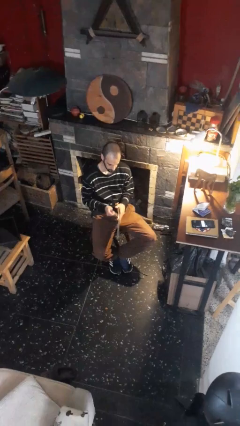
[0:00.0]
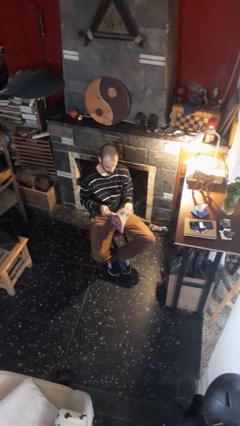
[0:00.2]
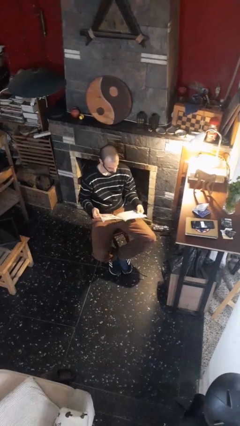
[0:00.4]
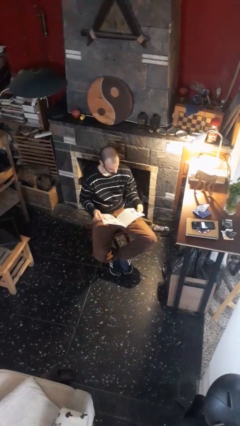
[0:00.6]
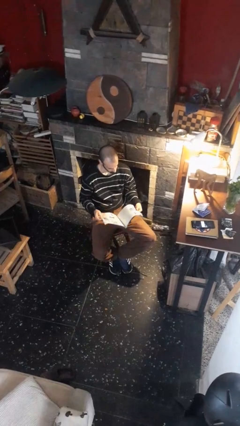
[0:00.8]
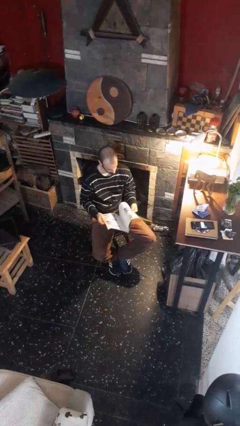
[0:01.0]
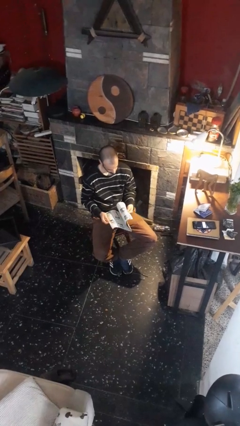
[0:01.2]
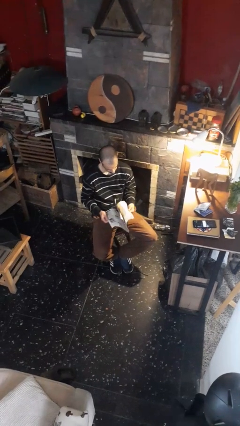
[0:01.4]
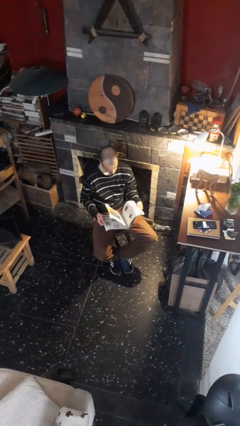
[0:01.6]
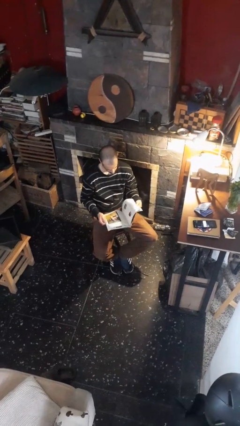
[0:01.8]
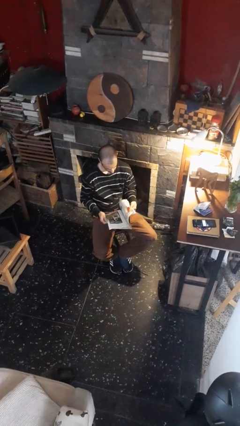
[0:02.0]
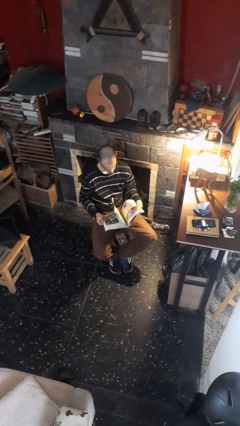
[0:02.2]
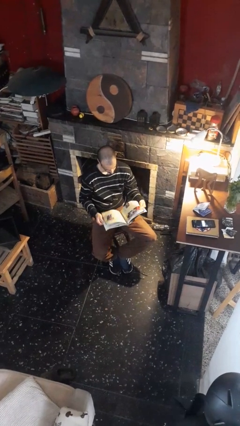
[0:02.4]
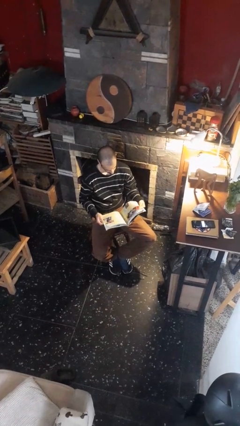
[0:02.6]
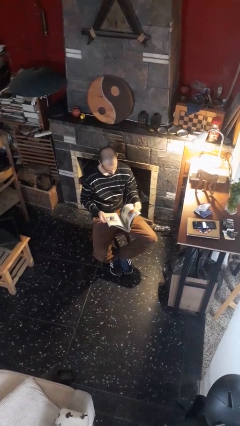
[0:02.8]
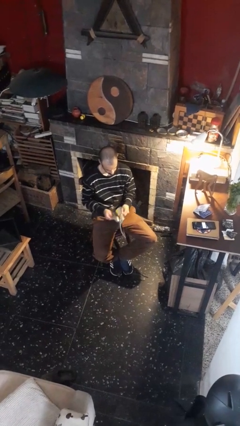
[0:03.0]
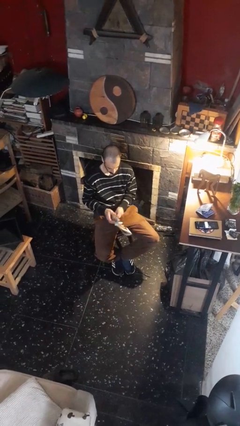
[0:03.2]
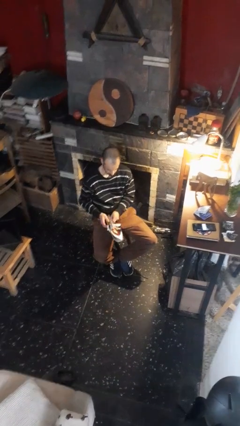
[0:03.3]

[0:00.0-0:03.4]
person reads magazine

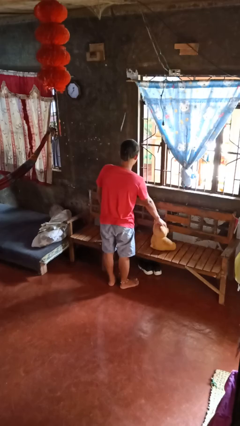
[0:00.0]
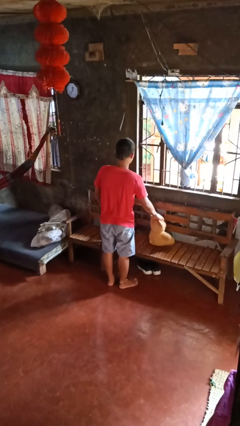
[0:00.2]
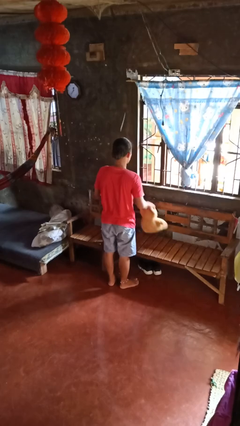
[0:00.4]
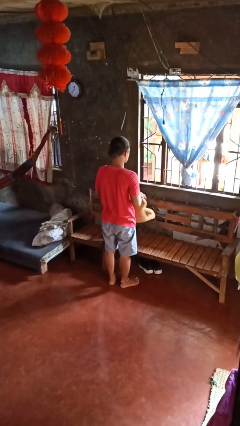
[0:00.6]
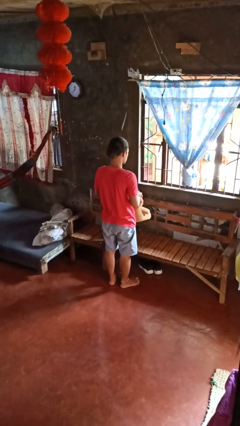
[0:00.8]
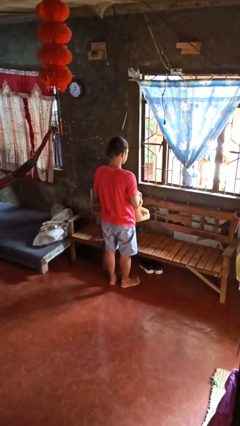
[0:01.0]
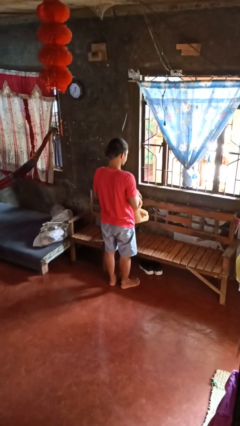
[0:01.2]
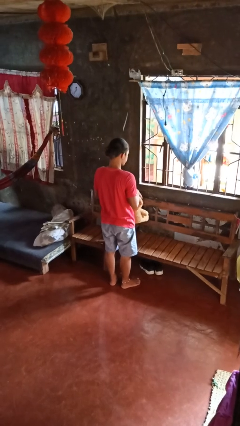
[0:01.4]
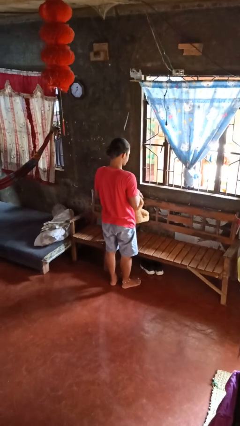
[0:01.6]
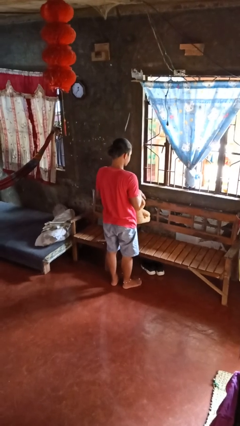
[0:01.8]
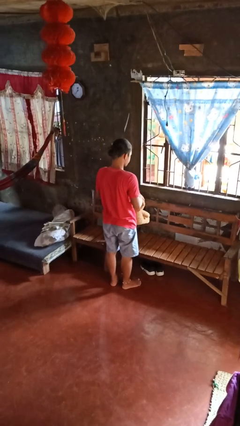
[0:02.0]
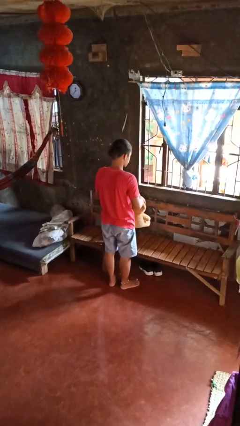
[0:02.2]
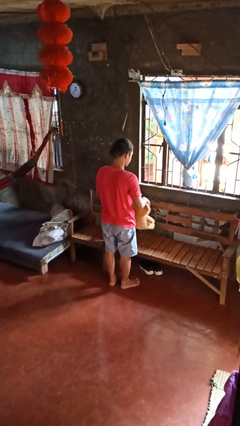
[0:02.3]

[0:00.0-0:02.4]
person picks up object from couch

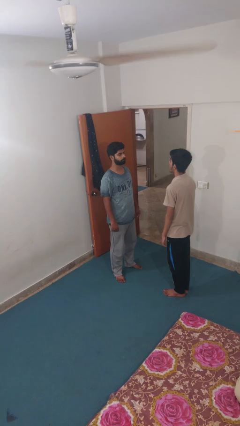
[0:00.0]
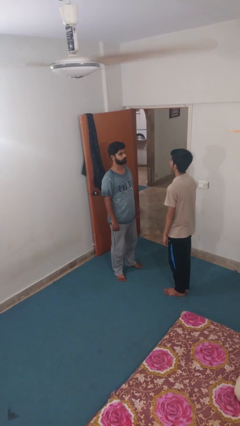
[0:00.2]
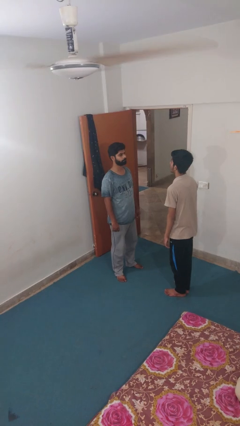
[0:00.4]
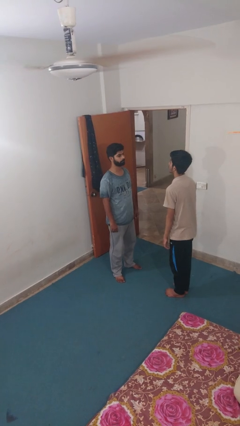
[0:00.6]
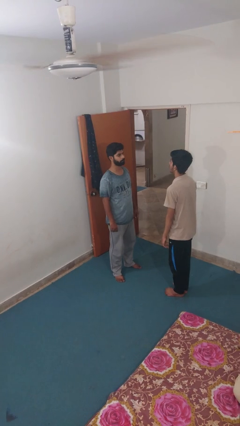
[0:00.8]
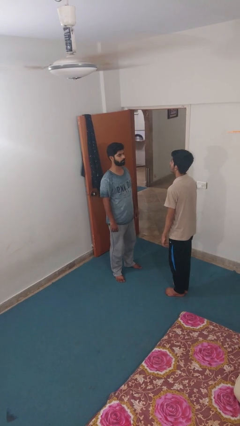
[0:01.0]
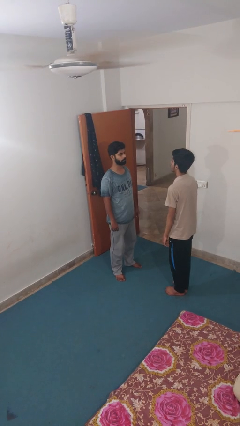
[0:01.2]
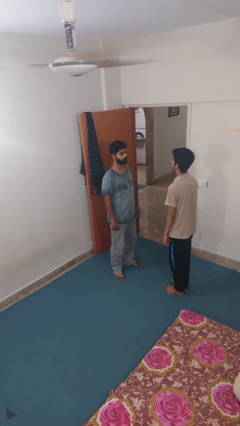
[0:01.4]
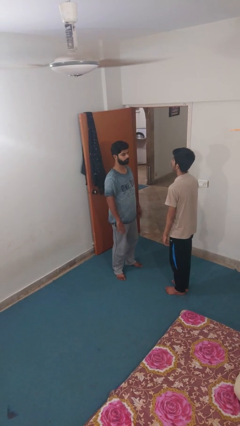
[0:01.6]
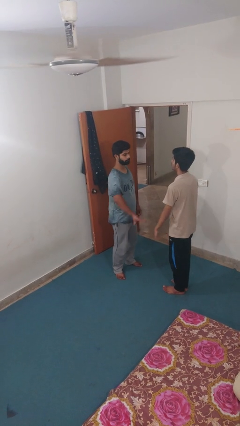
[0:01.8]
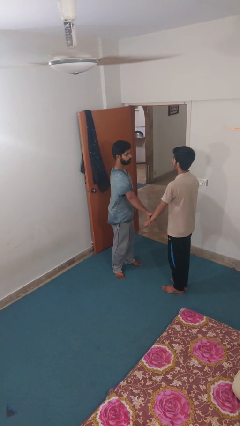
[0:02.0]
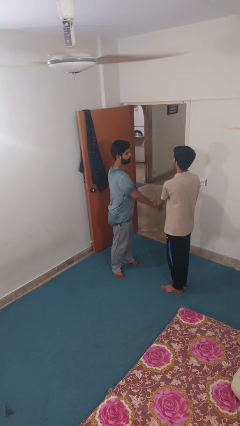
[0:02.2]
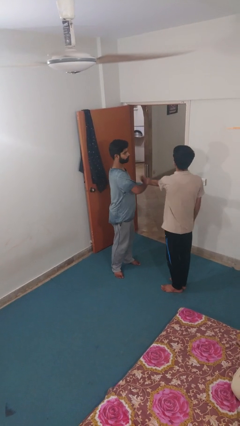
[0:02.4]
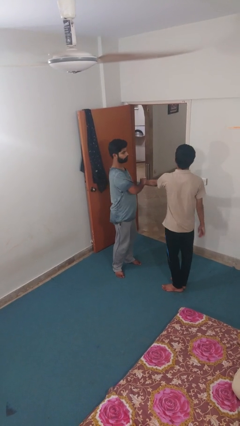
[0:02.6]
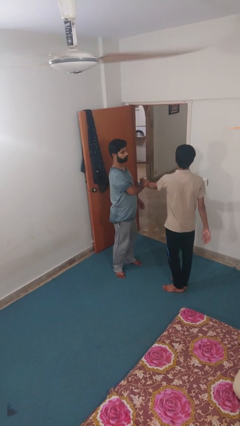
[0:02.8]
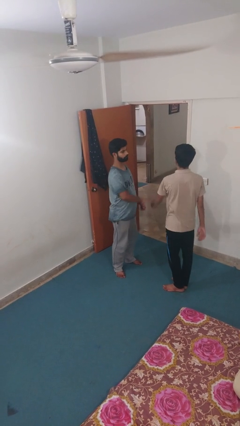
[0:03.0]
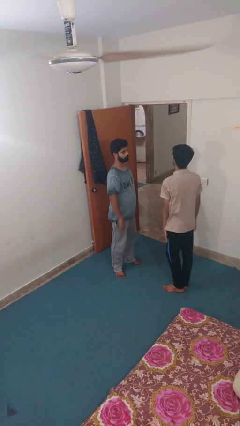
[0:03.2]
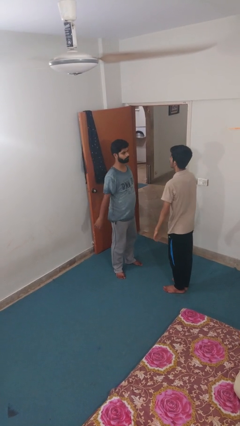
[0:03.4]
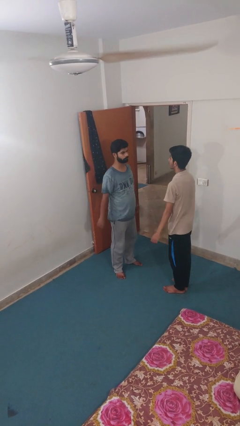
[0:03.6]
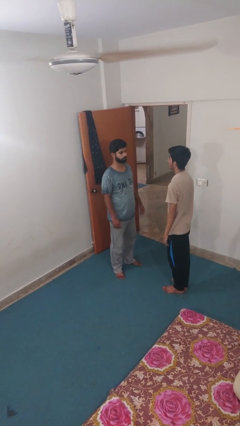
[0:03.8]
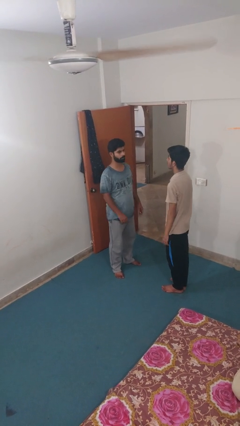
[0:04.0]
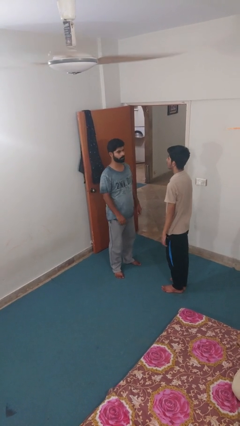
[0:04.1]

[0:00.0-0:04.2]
person grabs person by forearm

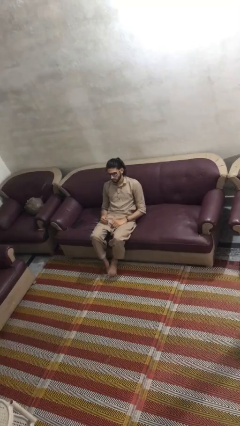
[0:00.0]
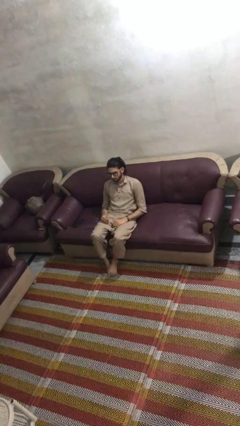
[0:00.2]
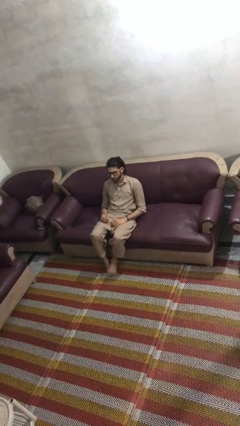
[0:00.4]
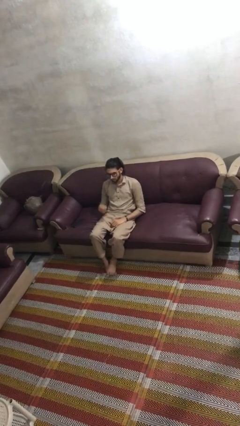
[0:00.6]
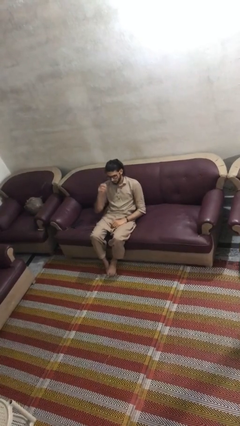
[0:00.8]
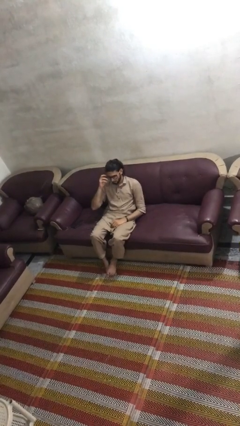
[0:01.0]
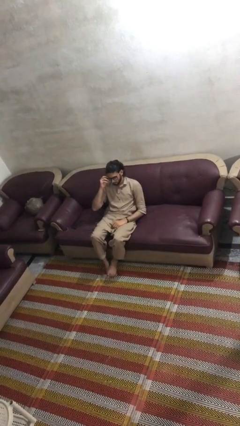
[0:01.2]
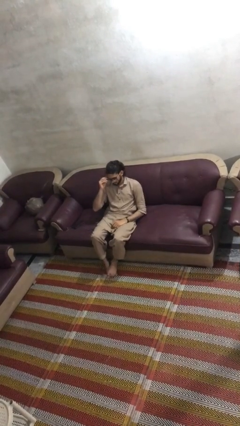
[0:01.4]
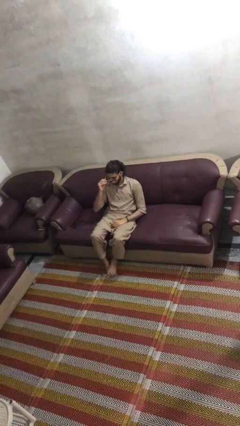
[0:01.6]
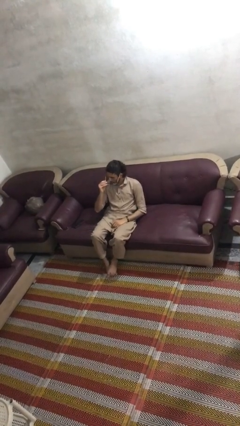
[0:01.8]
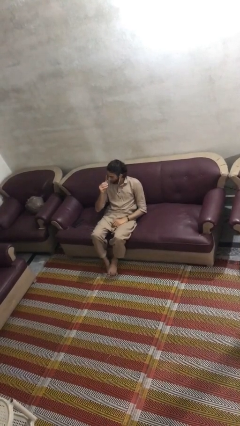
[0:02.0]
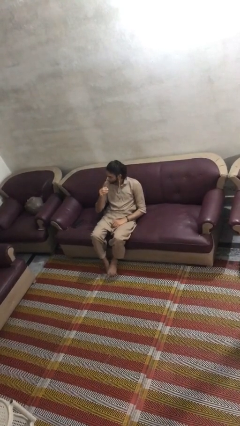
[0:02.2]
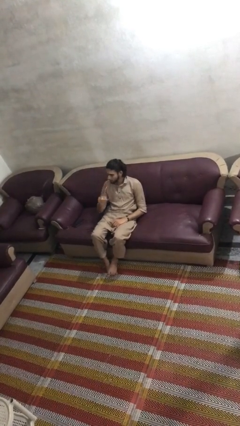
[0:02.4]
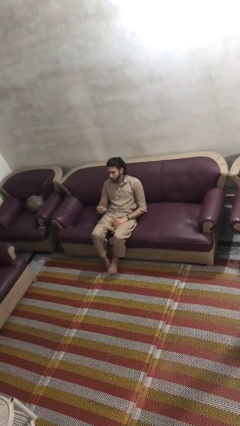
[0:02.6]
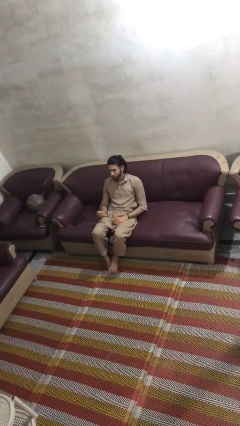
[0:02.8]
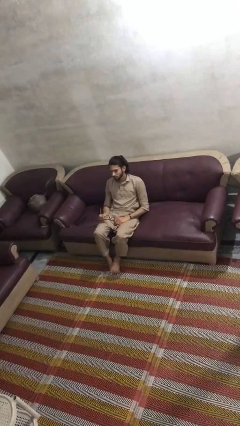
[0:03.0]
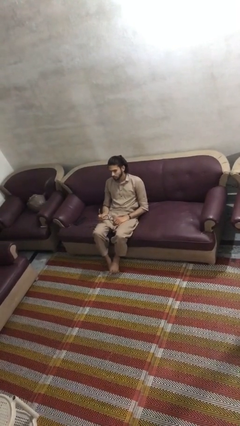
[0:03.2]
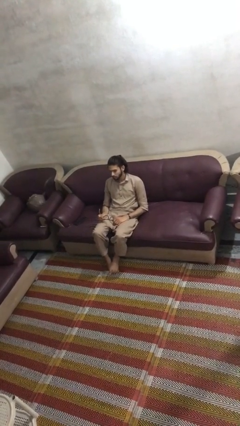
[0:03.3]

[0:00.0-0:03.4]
person takes off glasses

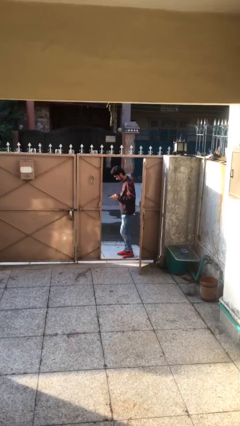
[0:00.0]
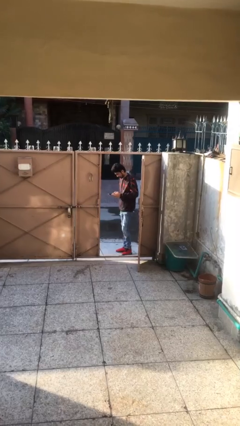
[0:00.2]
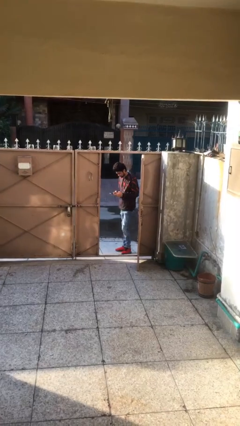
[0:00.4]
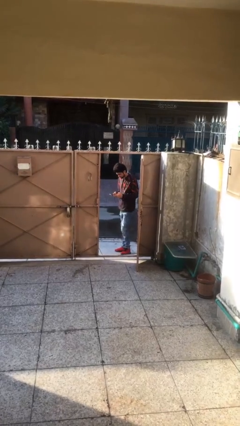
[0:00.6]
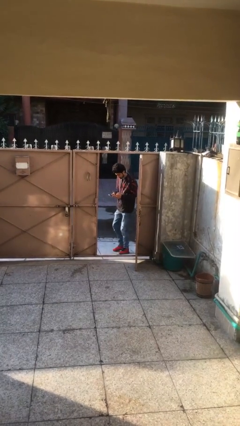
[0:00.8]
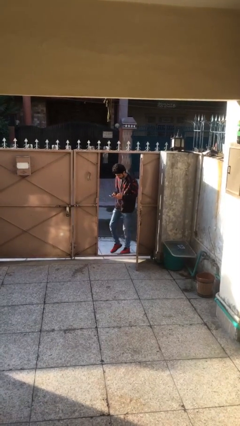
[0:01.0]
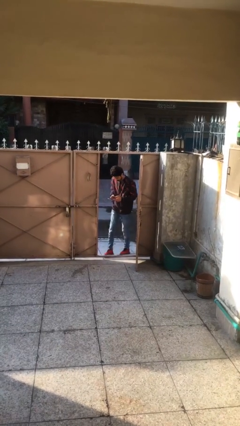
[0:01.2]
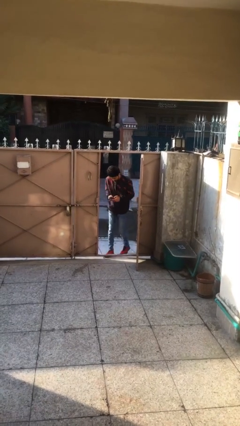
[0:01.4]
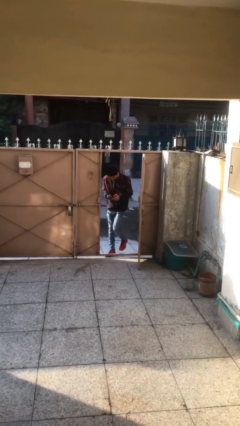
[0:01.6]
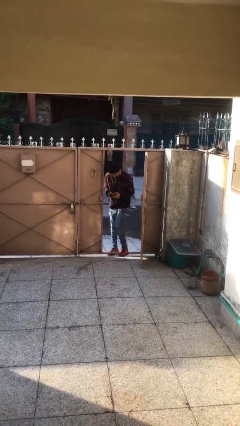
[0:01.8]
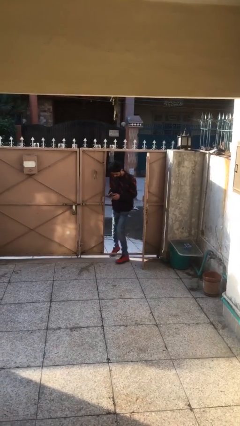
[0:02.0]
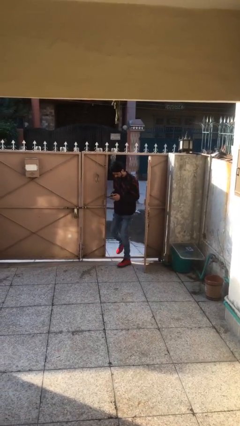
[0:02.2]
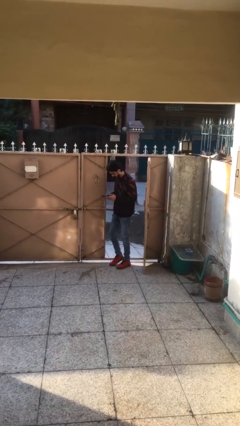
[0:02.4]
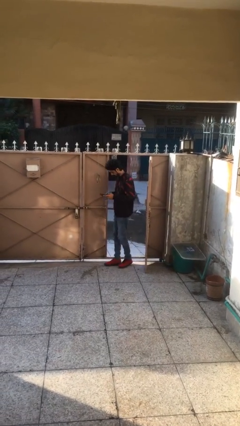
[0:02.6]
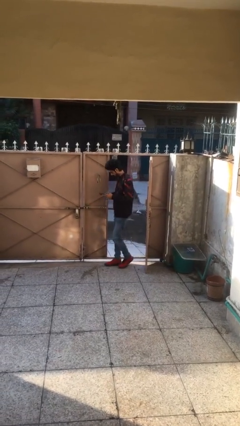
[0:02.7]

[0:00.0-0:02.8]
person enters scene through structure

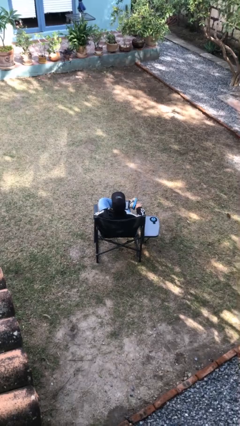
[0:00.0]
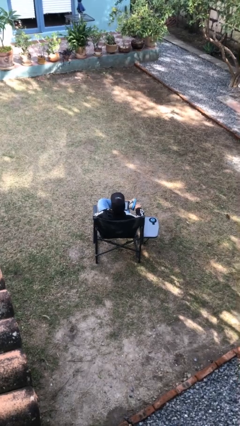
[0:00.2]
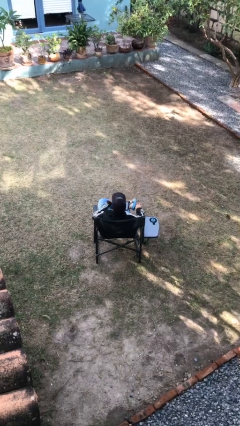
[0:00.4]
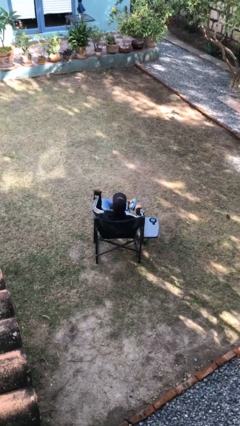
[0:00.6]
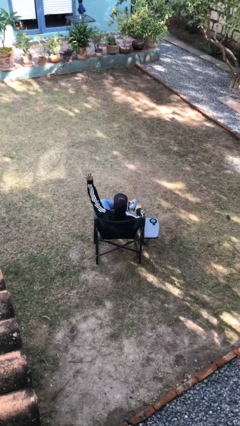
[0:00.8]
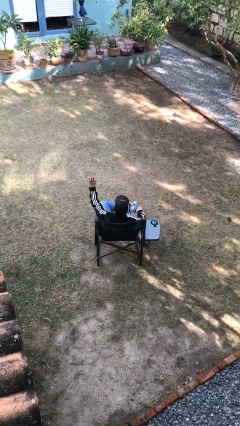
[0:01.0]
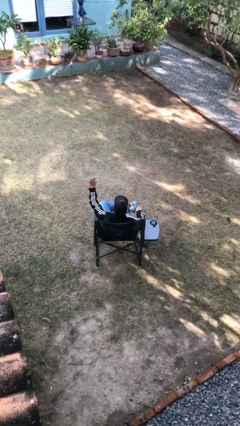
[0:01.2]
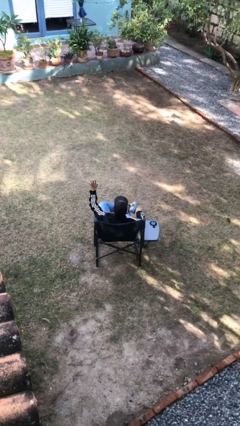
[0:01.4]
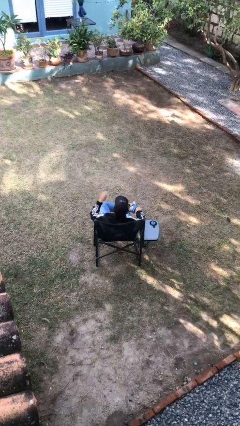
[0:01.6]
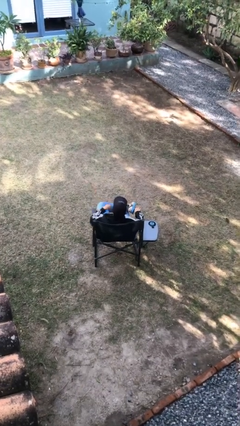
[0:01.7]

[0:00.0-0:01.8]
person gestures number five
